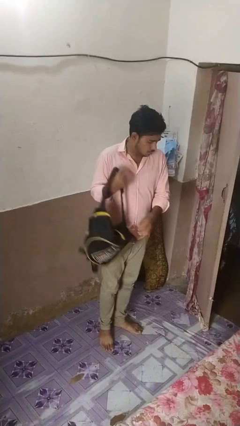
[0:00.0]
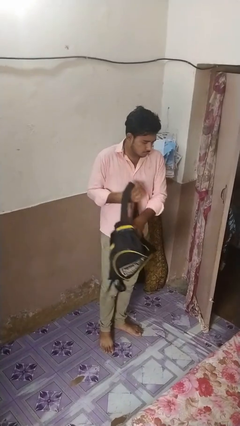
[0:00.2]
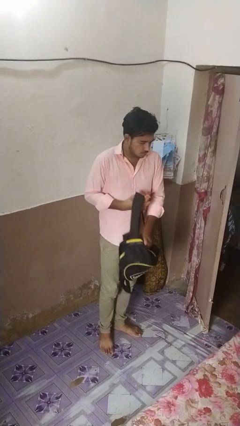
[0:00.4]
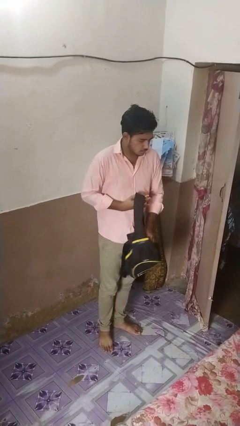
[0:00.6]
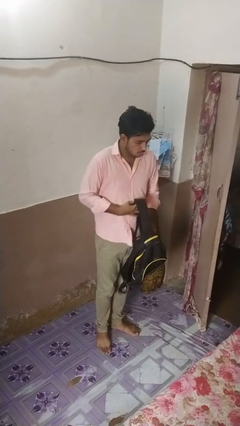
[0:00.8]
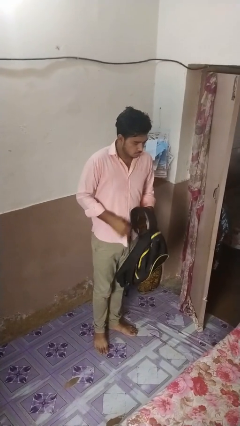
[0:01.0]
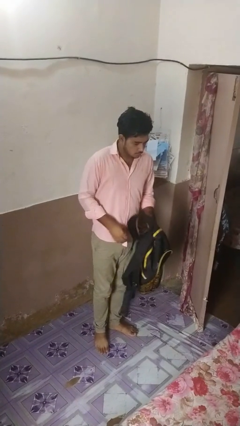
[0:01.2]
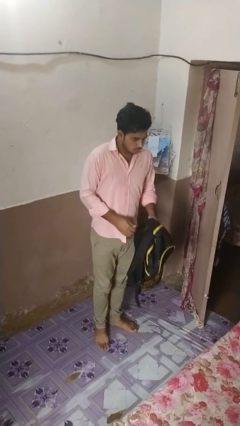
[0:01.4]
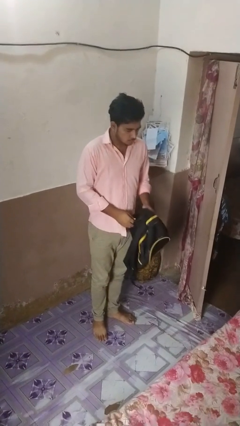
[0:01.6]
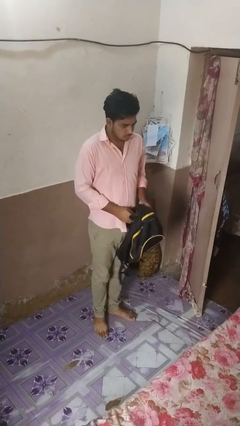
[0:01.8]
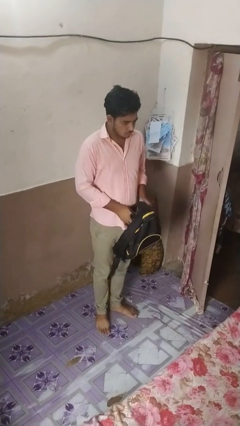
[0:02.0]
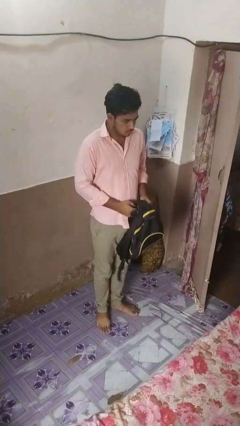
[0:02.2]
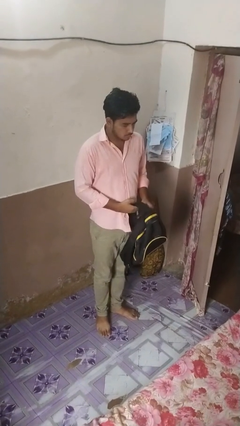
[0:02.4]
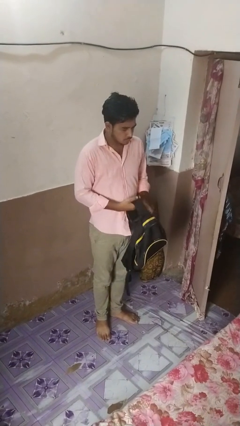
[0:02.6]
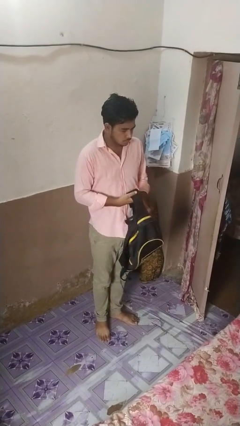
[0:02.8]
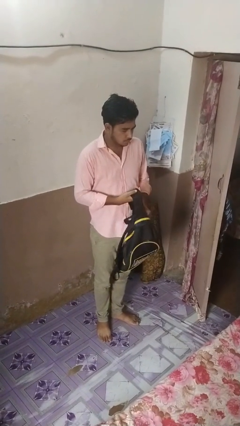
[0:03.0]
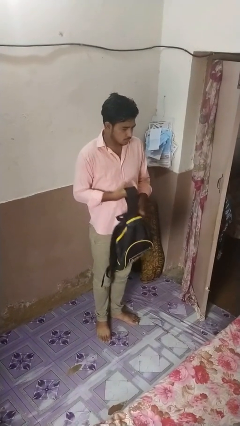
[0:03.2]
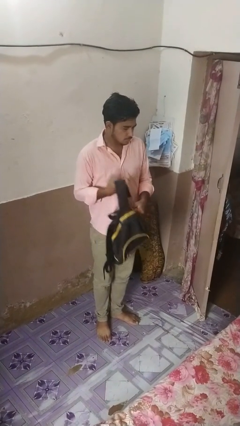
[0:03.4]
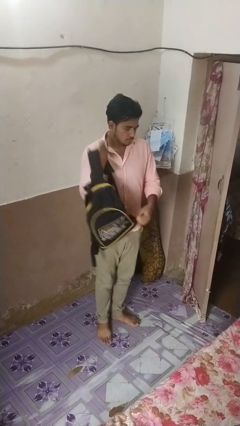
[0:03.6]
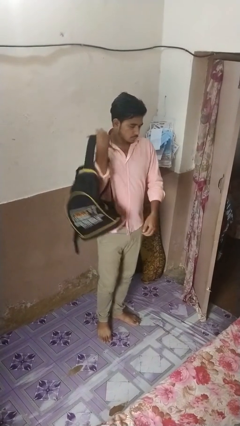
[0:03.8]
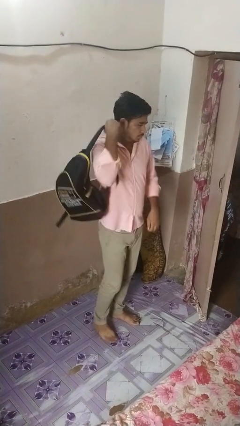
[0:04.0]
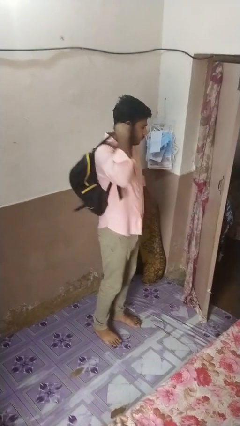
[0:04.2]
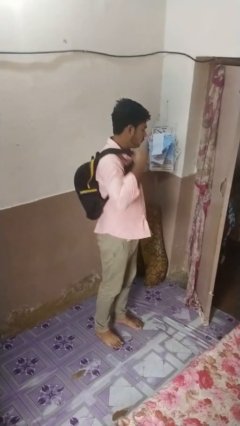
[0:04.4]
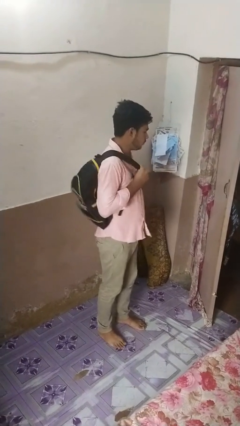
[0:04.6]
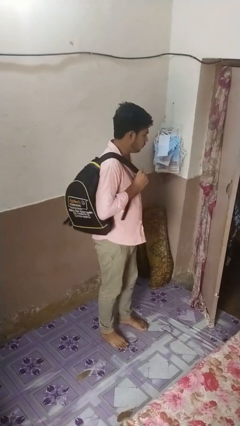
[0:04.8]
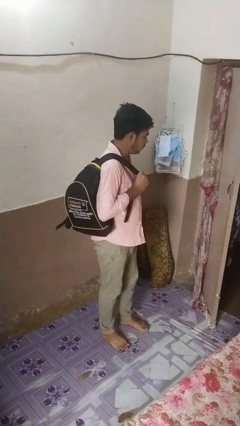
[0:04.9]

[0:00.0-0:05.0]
person takes off backpack

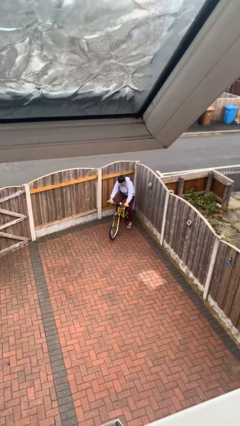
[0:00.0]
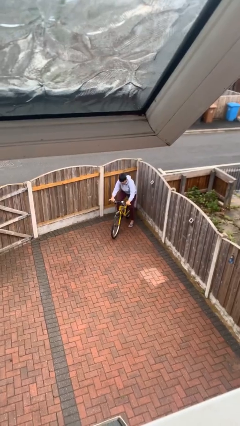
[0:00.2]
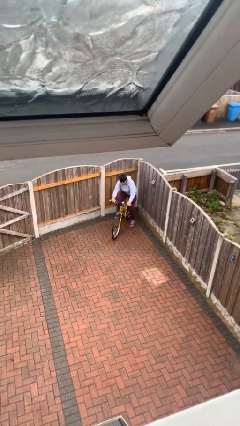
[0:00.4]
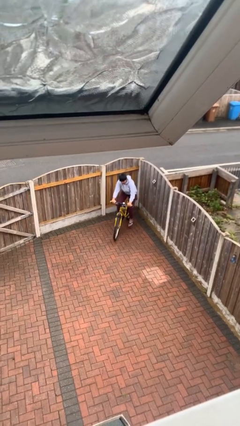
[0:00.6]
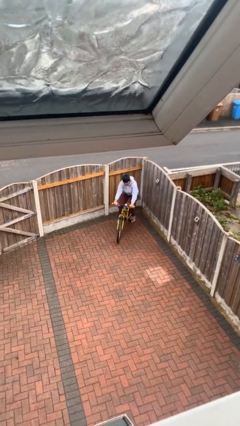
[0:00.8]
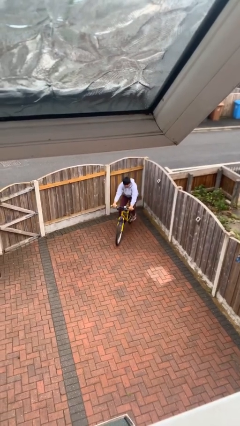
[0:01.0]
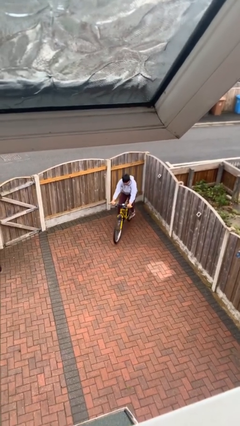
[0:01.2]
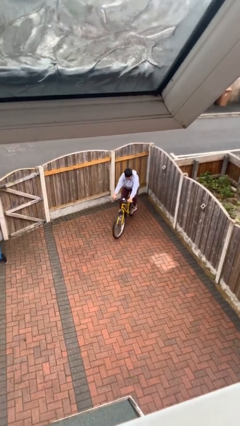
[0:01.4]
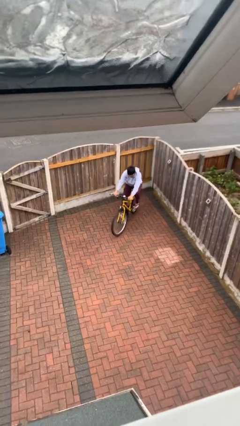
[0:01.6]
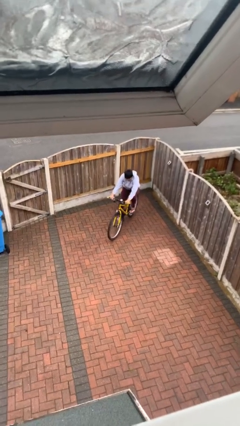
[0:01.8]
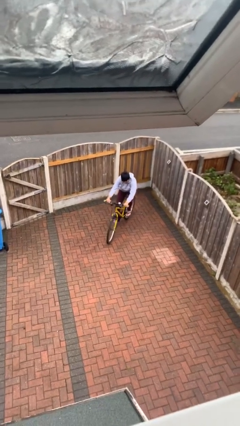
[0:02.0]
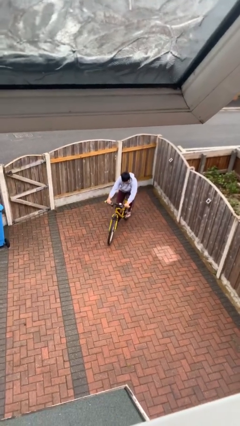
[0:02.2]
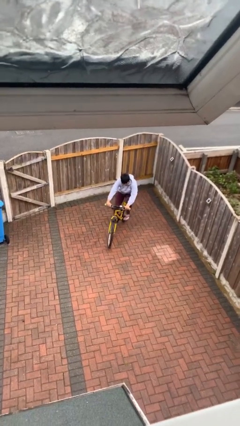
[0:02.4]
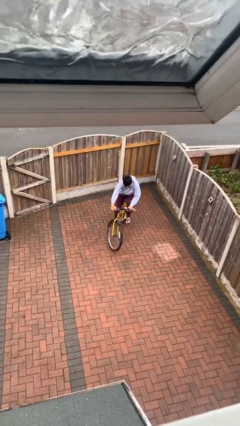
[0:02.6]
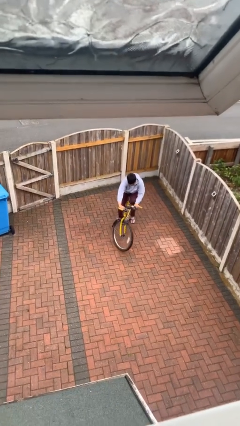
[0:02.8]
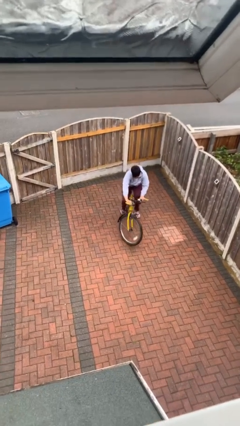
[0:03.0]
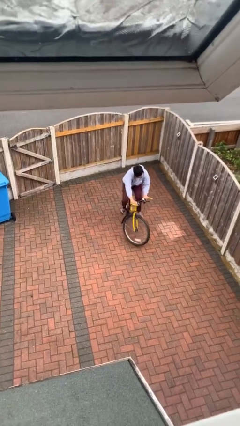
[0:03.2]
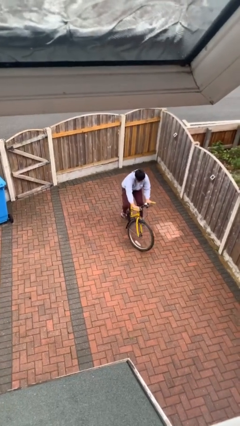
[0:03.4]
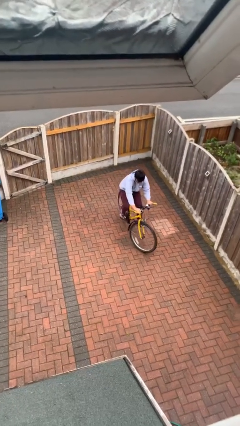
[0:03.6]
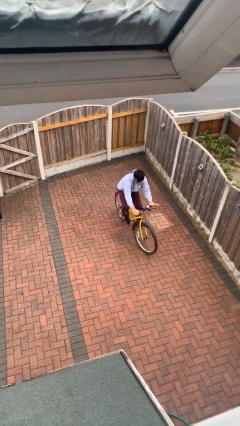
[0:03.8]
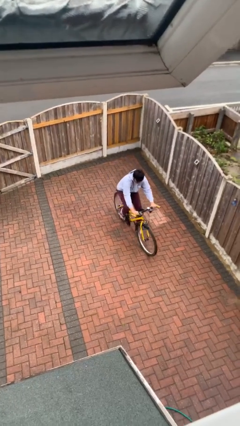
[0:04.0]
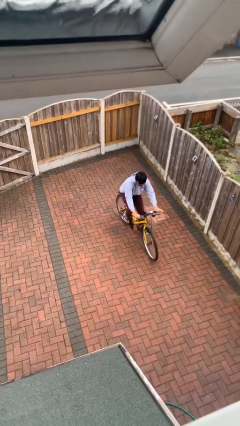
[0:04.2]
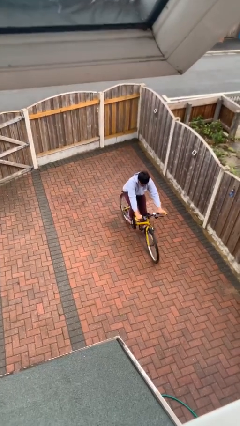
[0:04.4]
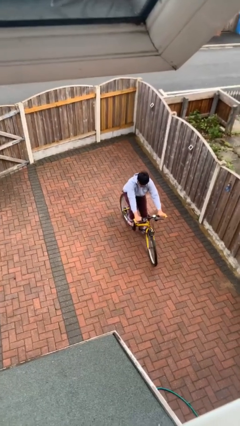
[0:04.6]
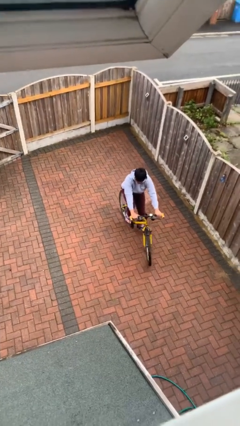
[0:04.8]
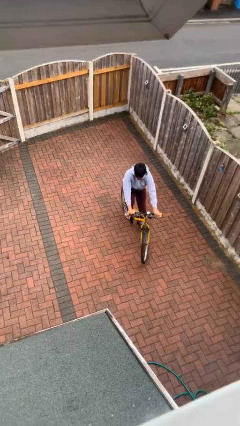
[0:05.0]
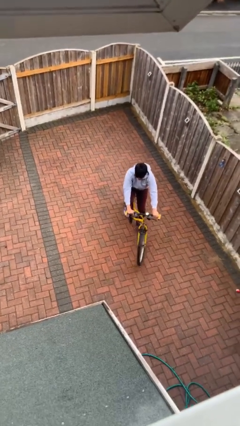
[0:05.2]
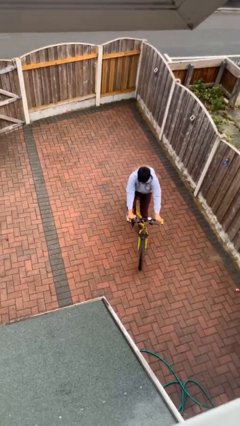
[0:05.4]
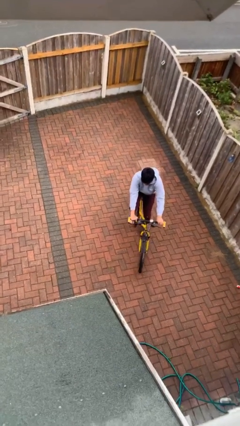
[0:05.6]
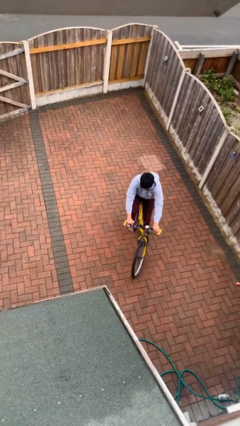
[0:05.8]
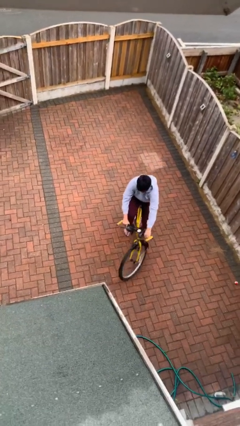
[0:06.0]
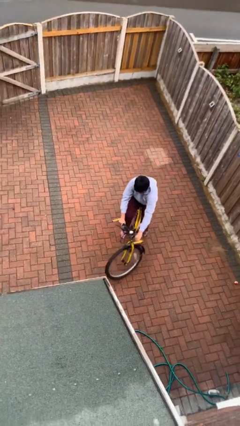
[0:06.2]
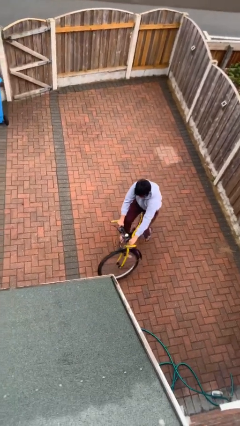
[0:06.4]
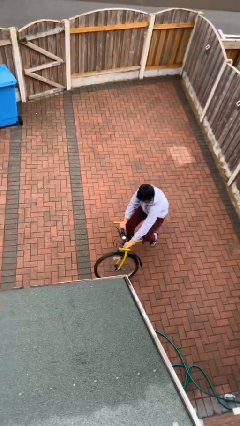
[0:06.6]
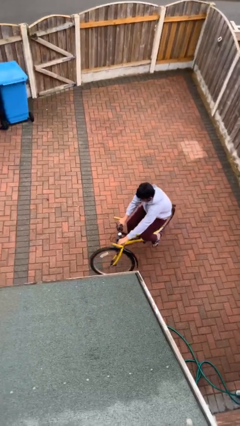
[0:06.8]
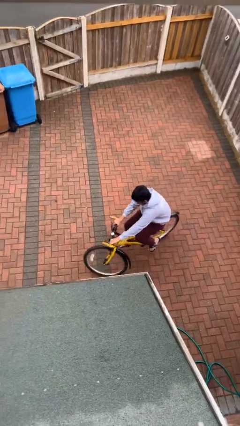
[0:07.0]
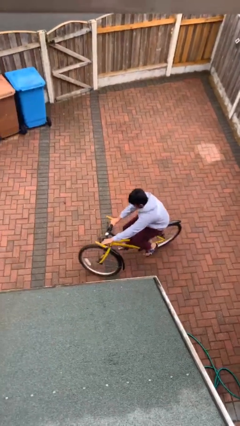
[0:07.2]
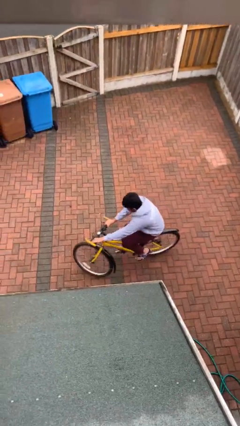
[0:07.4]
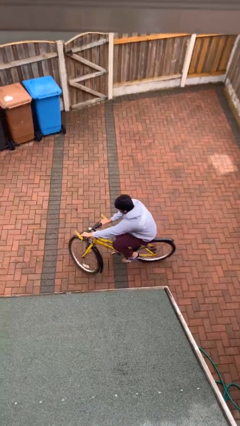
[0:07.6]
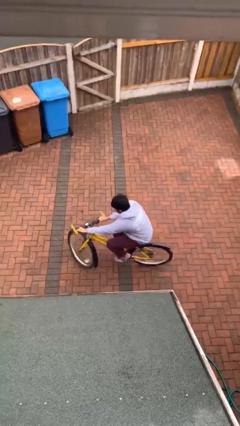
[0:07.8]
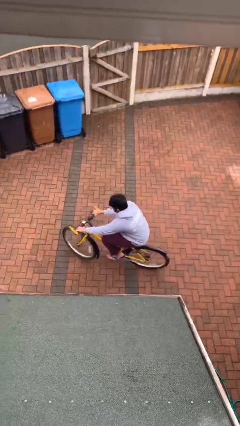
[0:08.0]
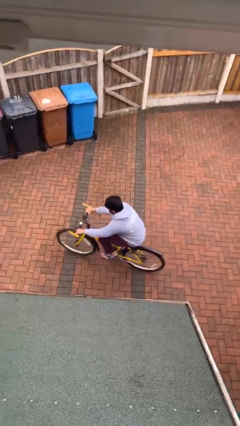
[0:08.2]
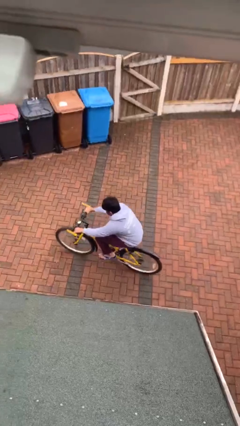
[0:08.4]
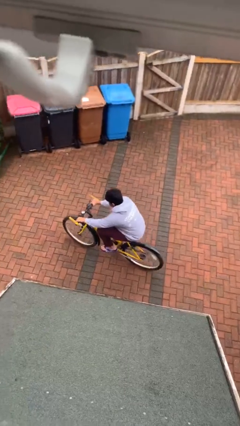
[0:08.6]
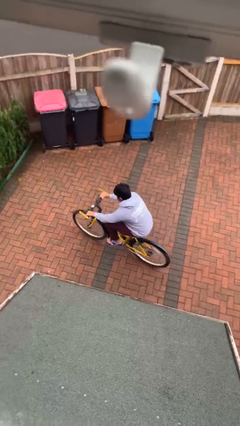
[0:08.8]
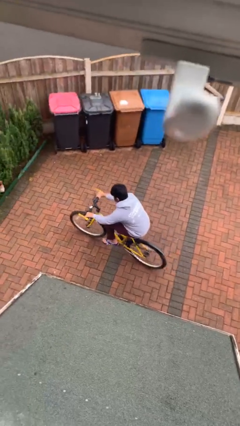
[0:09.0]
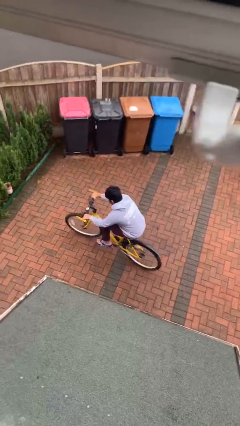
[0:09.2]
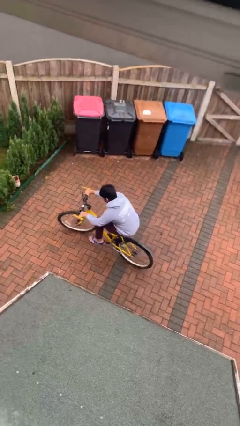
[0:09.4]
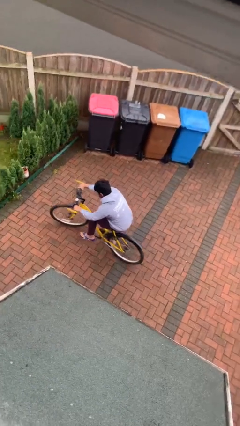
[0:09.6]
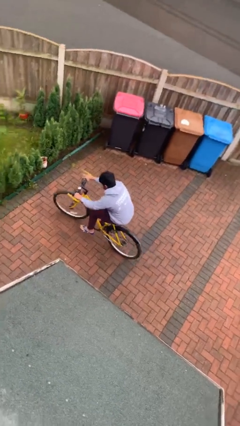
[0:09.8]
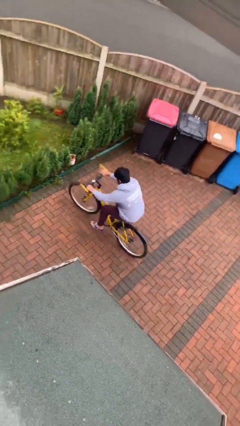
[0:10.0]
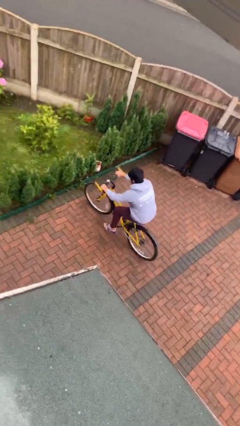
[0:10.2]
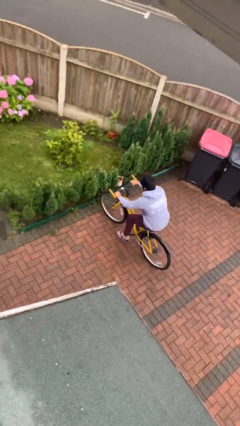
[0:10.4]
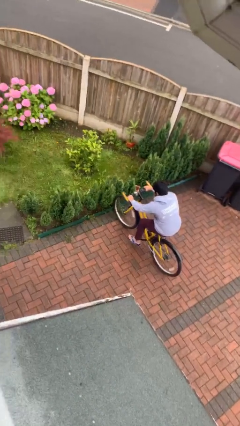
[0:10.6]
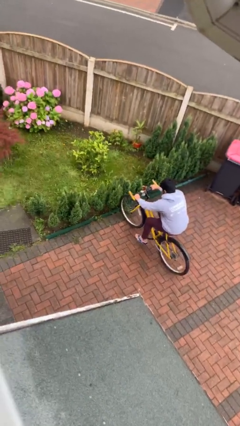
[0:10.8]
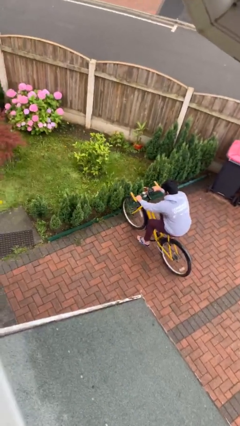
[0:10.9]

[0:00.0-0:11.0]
person rides bicycle

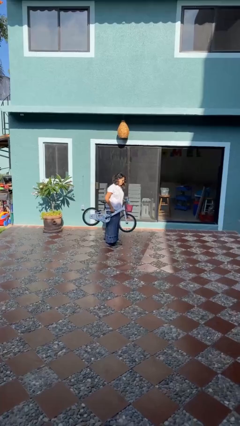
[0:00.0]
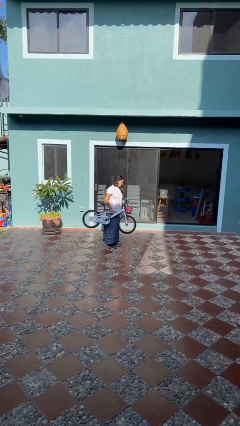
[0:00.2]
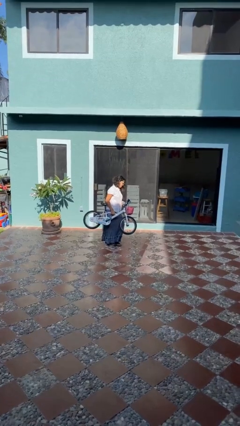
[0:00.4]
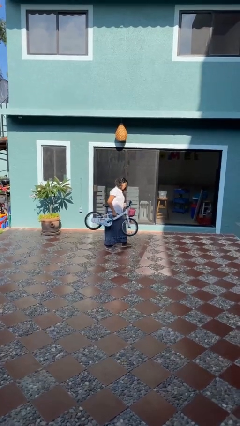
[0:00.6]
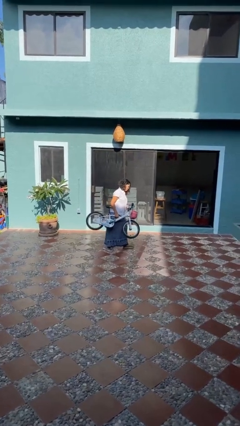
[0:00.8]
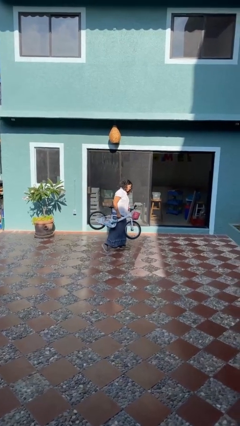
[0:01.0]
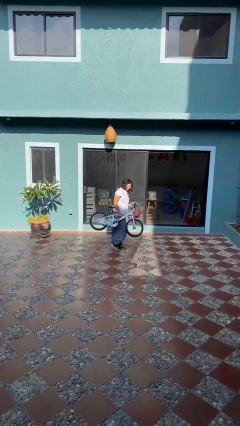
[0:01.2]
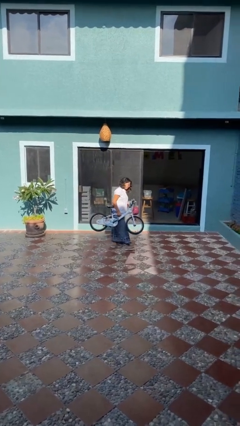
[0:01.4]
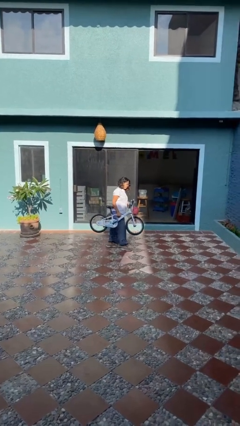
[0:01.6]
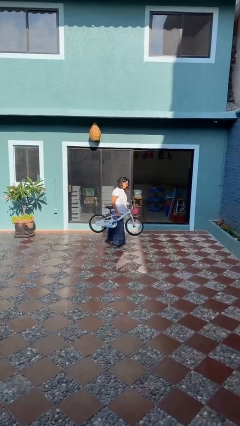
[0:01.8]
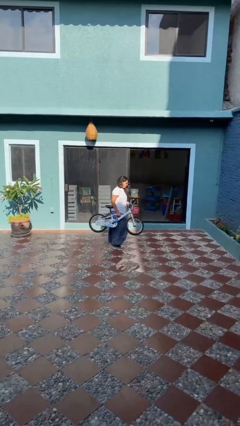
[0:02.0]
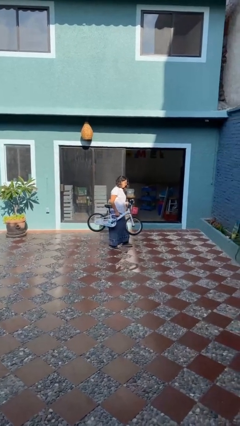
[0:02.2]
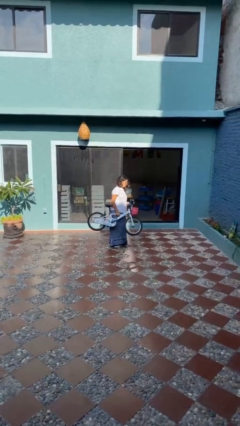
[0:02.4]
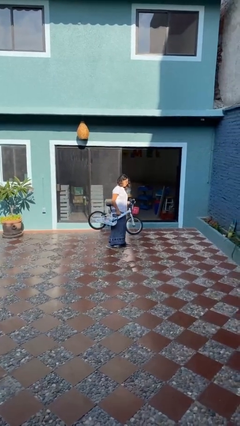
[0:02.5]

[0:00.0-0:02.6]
person carries bicycle
